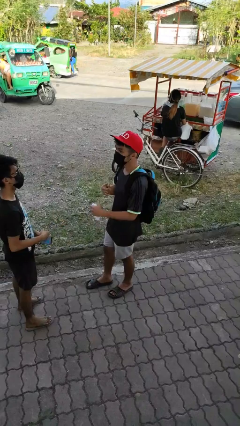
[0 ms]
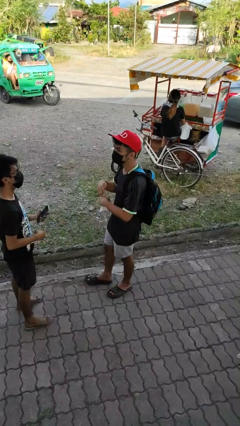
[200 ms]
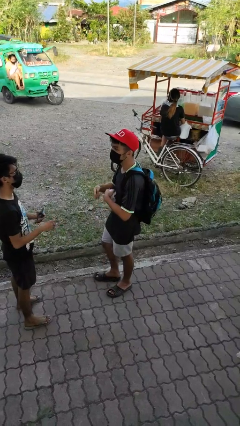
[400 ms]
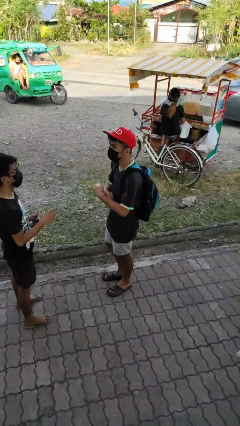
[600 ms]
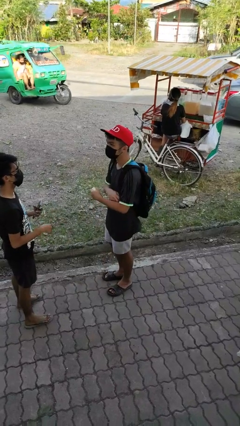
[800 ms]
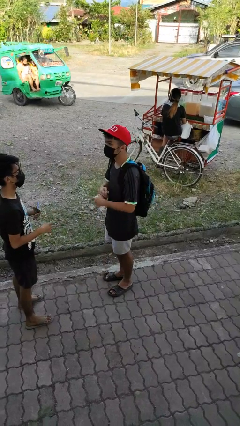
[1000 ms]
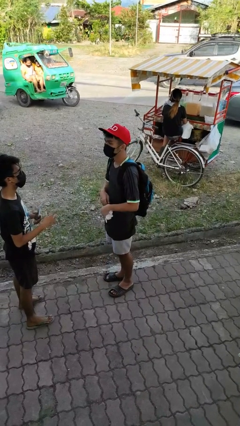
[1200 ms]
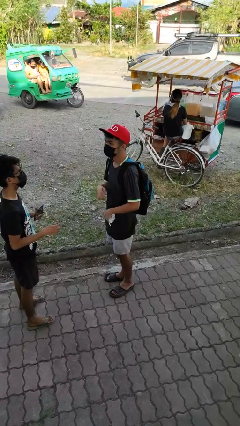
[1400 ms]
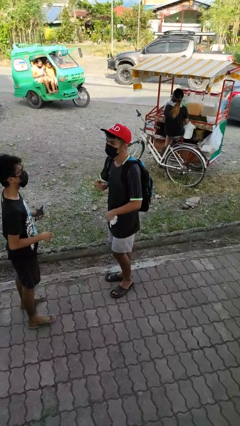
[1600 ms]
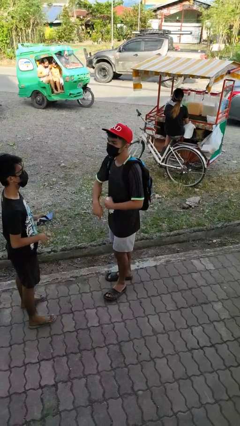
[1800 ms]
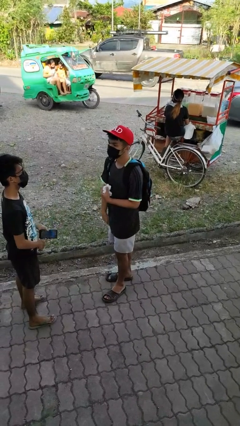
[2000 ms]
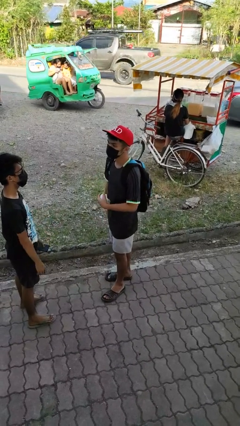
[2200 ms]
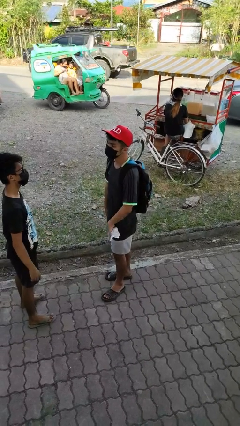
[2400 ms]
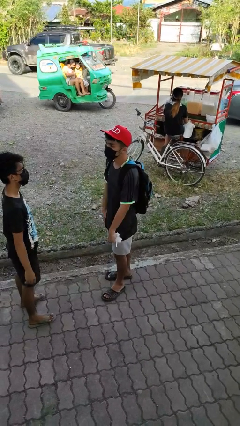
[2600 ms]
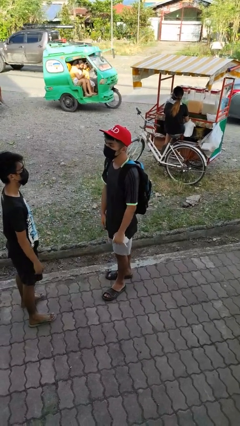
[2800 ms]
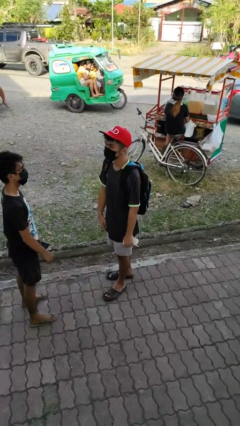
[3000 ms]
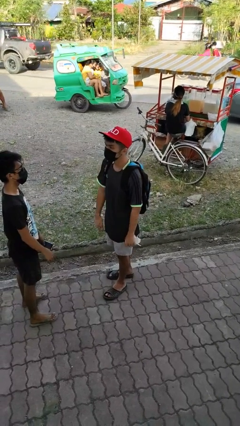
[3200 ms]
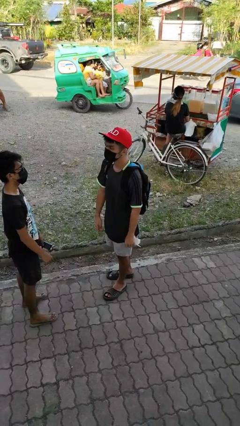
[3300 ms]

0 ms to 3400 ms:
person talks to person

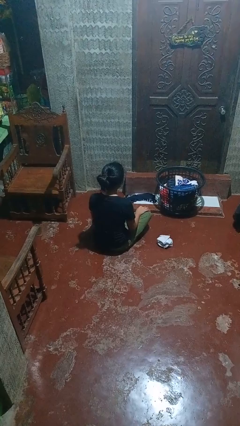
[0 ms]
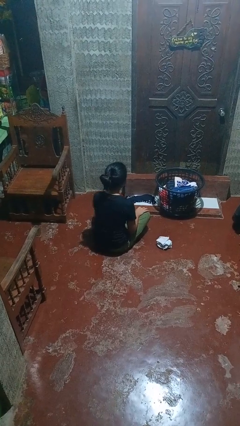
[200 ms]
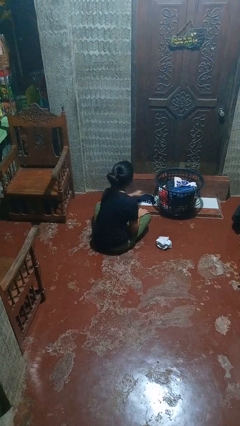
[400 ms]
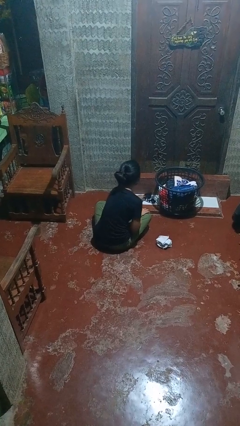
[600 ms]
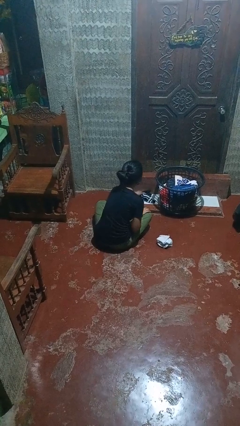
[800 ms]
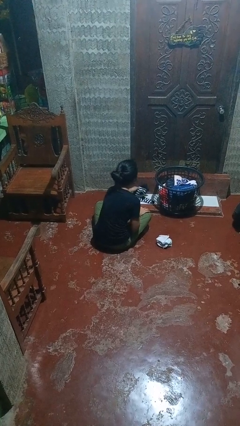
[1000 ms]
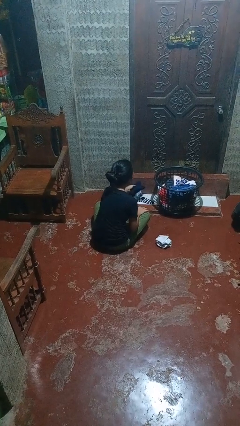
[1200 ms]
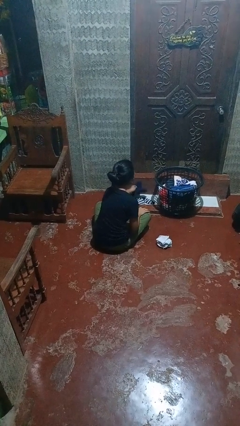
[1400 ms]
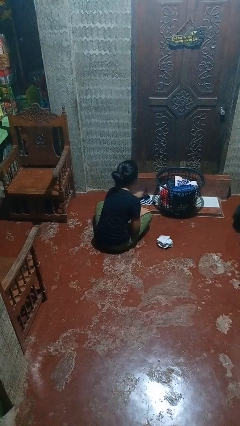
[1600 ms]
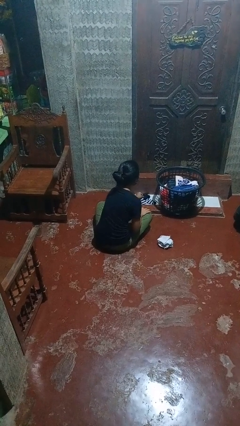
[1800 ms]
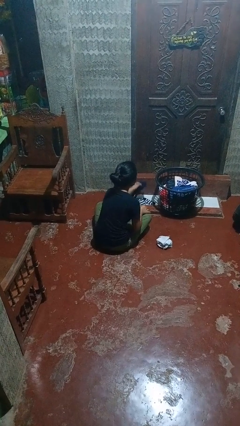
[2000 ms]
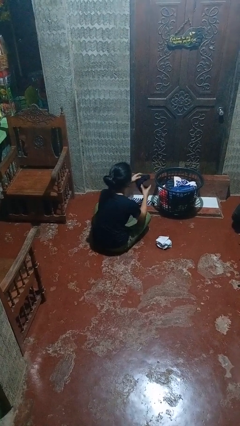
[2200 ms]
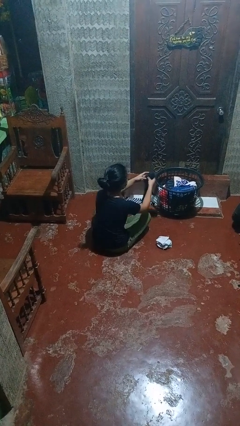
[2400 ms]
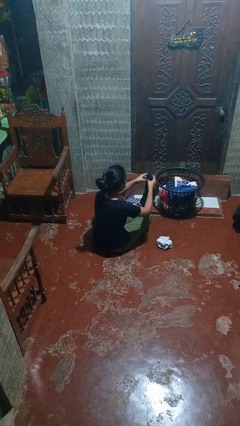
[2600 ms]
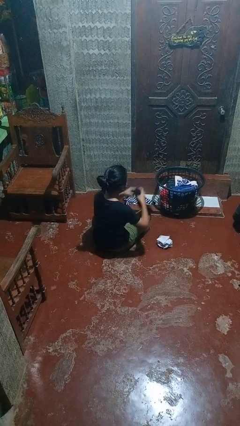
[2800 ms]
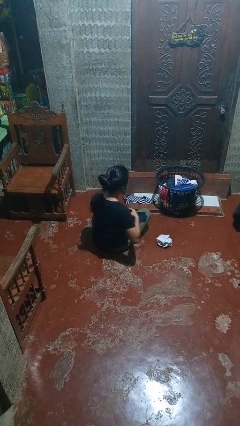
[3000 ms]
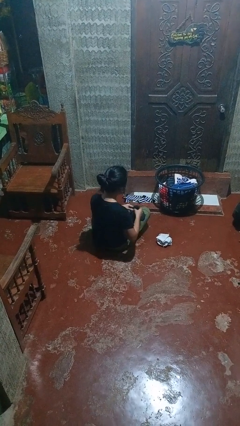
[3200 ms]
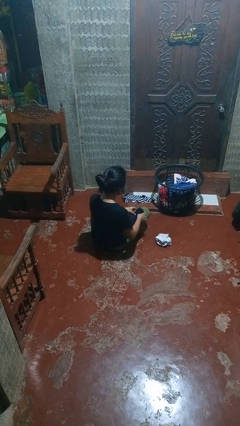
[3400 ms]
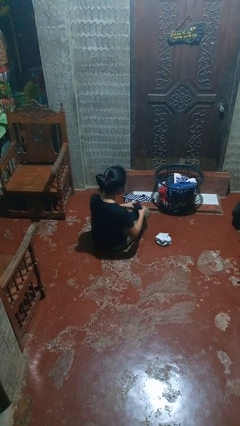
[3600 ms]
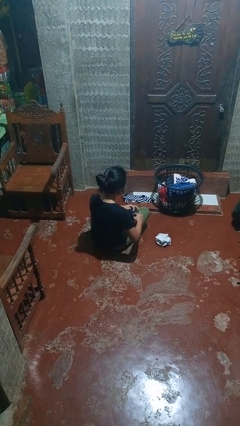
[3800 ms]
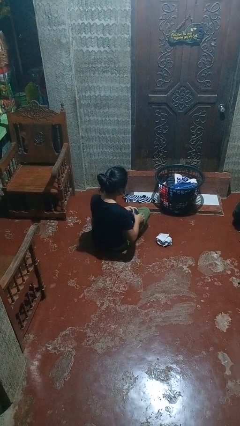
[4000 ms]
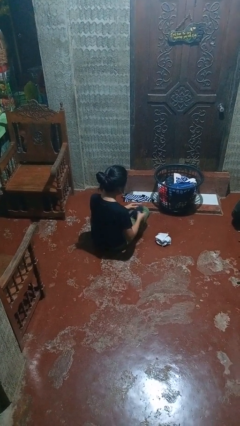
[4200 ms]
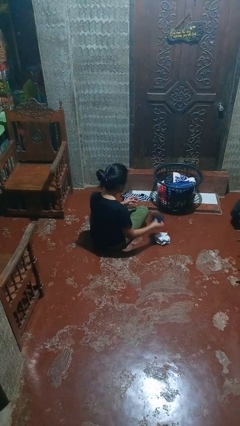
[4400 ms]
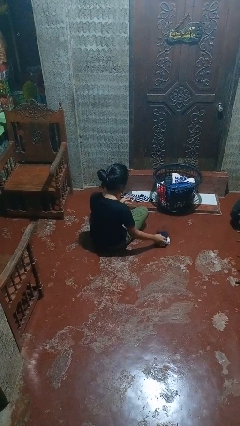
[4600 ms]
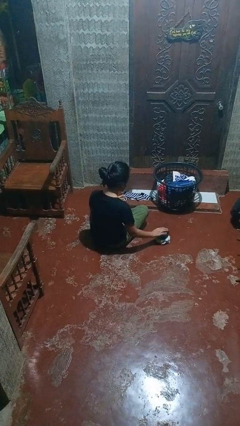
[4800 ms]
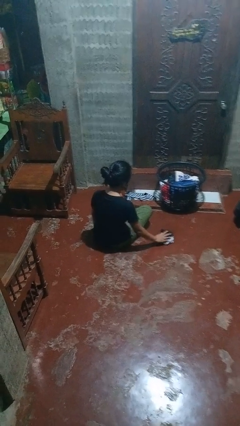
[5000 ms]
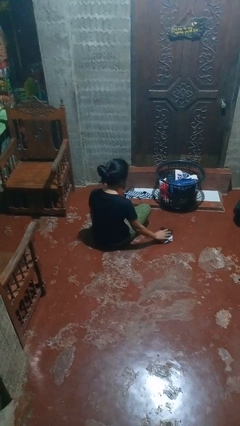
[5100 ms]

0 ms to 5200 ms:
person folds socks

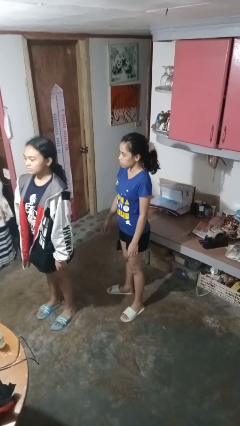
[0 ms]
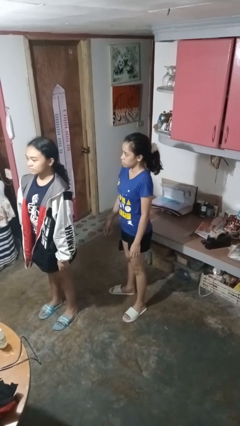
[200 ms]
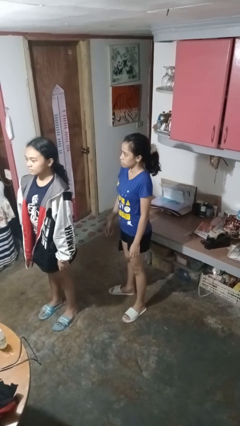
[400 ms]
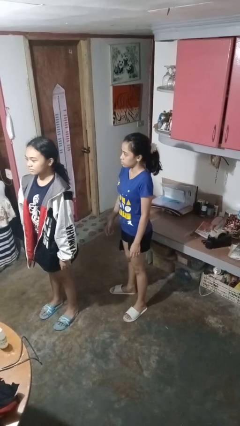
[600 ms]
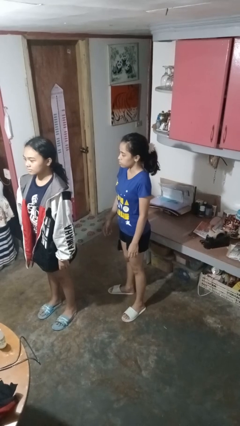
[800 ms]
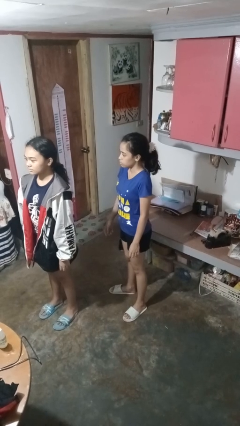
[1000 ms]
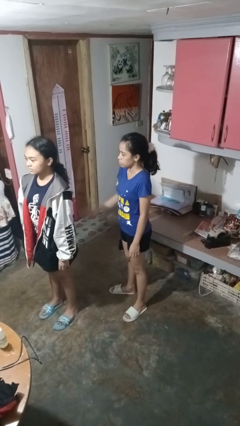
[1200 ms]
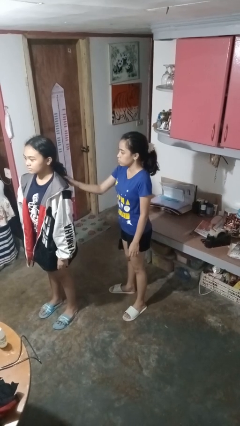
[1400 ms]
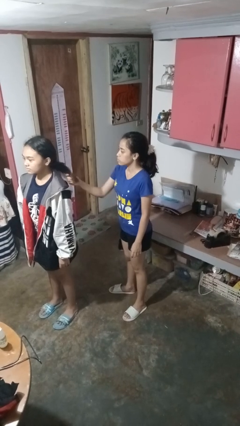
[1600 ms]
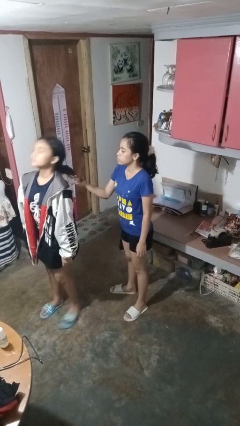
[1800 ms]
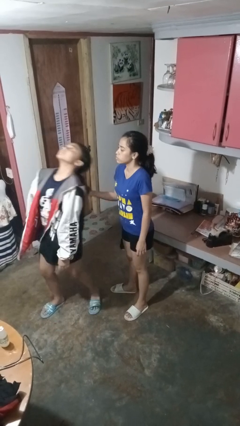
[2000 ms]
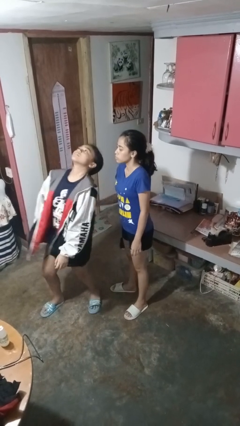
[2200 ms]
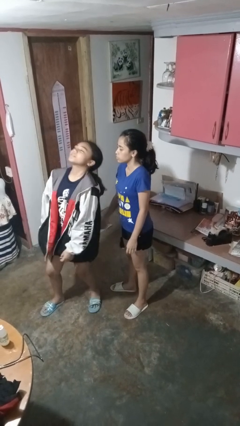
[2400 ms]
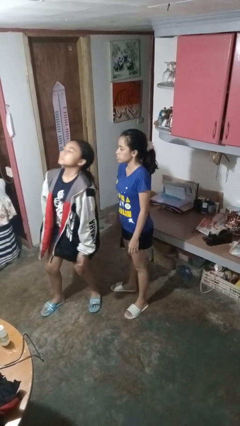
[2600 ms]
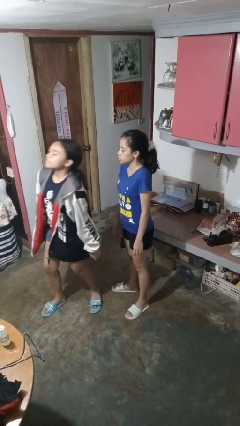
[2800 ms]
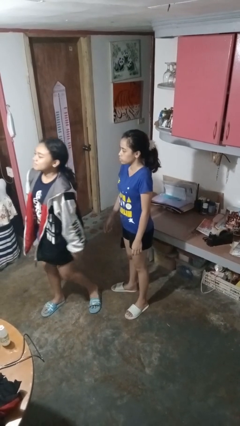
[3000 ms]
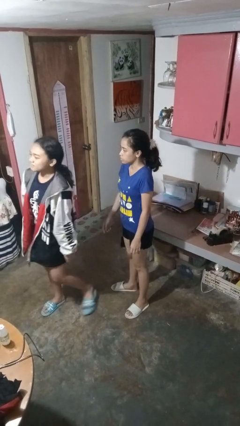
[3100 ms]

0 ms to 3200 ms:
person grabs person by hair

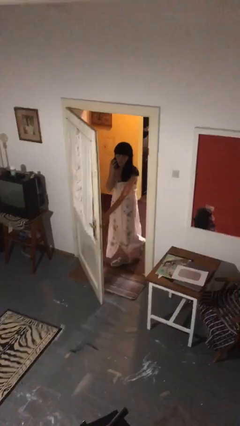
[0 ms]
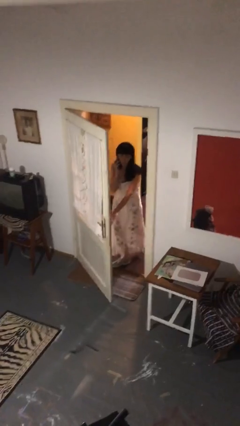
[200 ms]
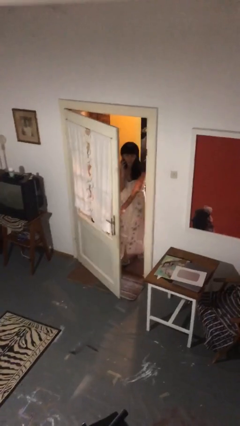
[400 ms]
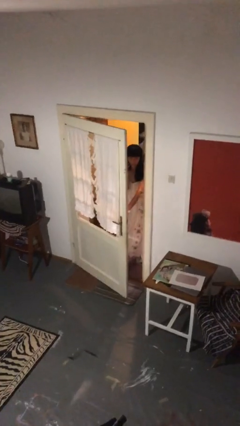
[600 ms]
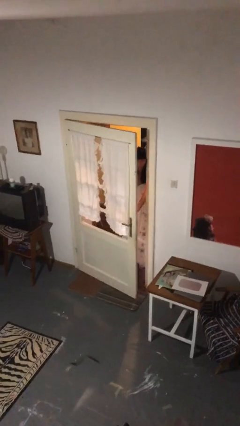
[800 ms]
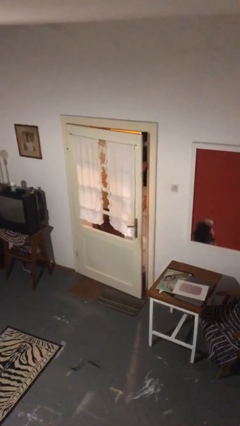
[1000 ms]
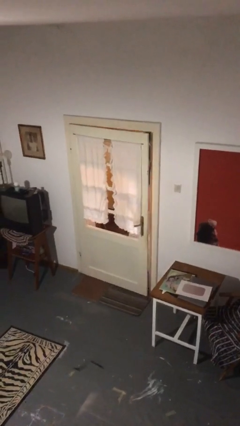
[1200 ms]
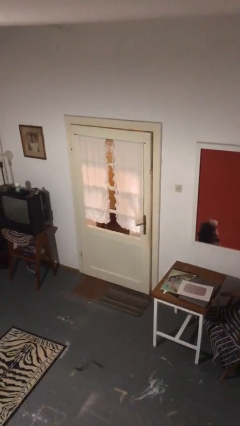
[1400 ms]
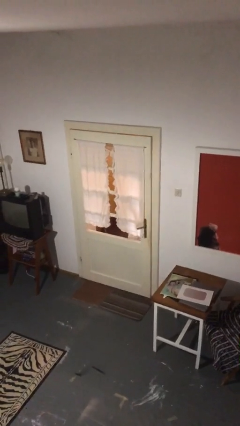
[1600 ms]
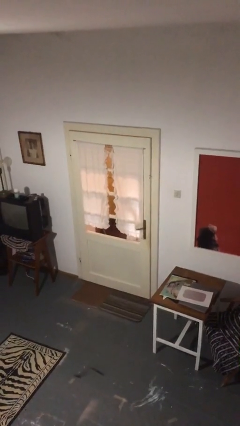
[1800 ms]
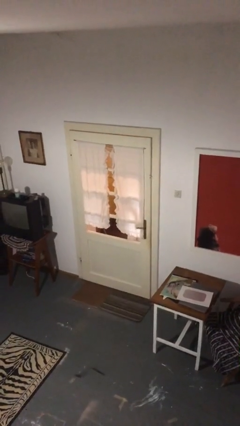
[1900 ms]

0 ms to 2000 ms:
person closes facility door

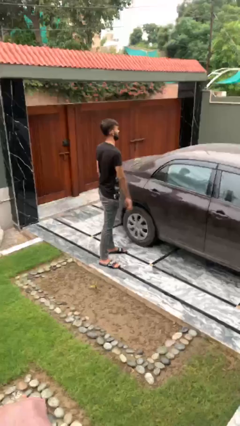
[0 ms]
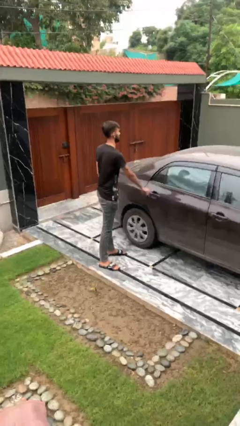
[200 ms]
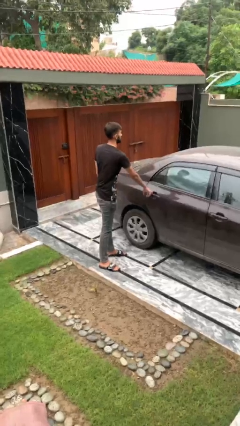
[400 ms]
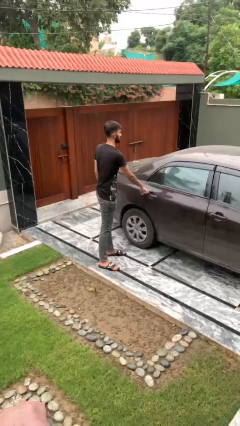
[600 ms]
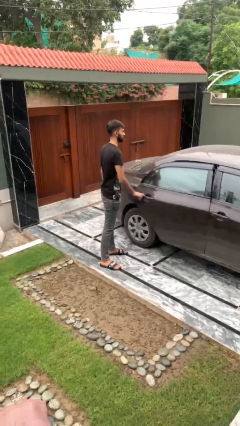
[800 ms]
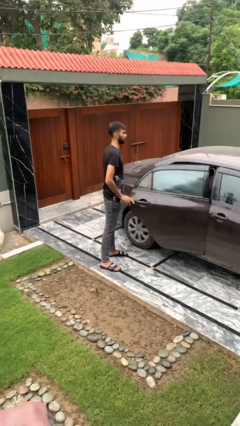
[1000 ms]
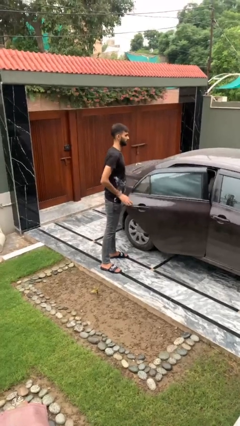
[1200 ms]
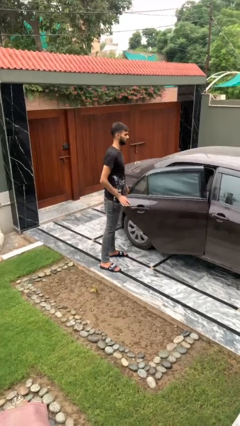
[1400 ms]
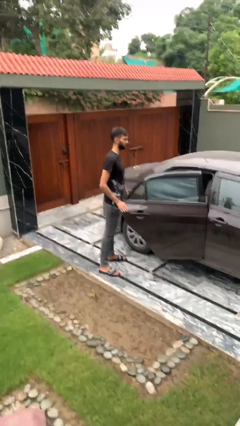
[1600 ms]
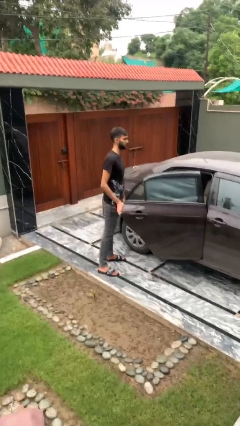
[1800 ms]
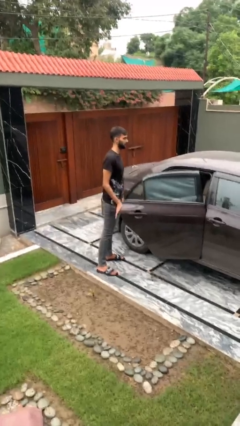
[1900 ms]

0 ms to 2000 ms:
person opens car door

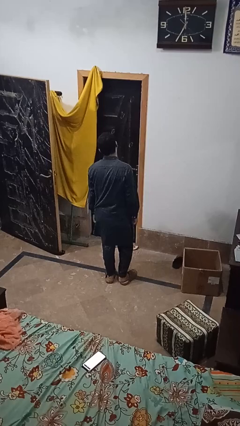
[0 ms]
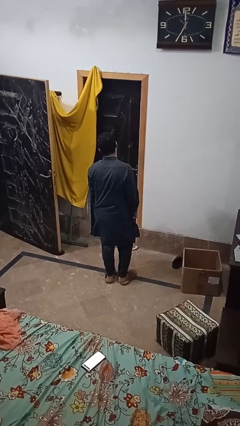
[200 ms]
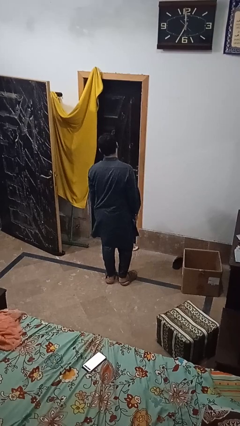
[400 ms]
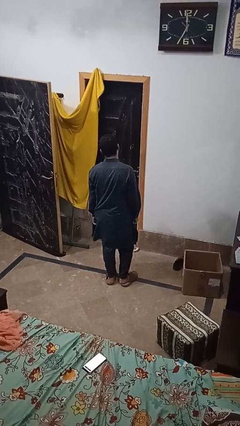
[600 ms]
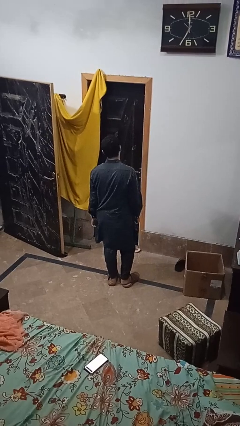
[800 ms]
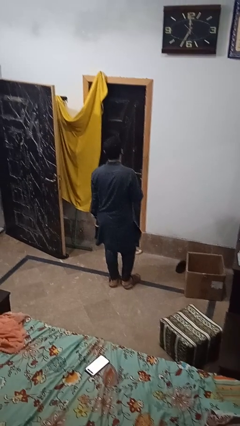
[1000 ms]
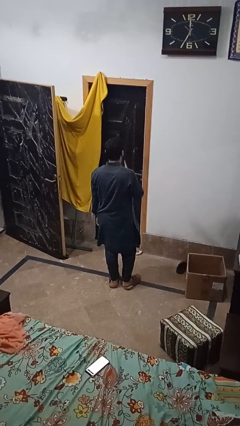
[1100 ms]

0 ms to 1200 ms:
person gestures be quiet
